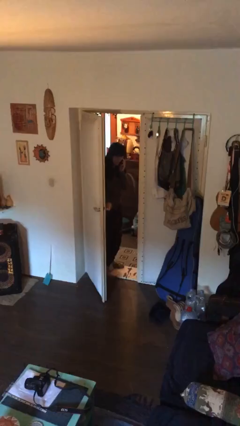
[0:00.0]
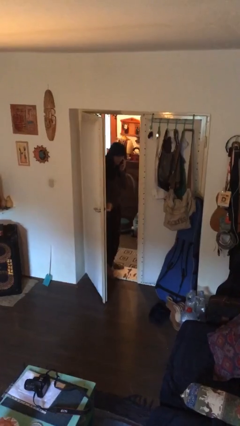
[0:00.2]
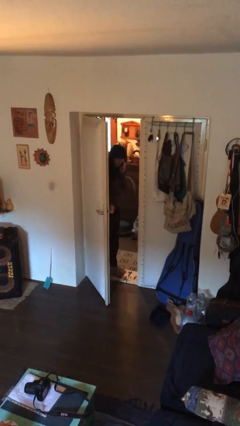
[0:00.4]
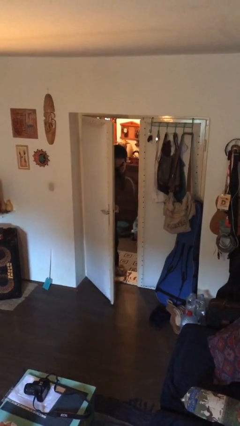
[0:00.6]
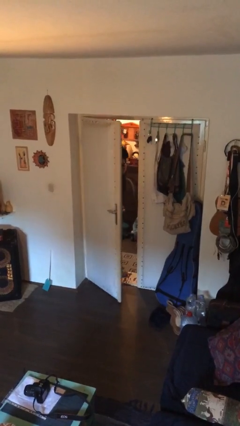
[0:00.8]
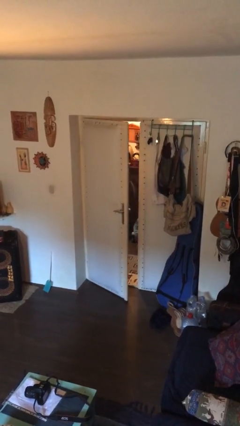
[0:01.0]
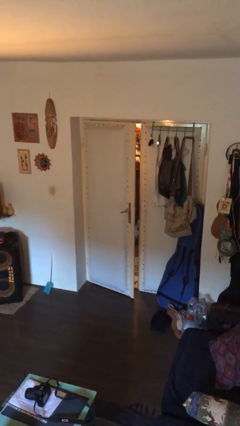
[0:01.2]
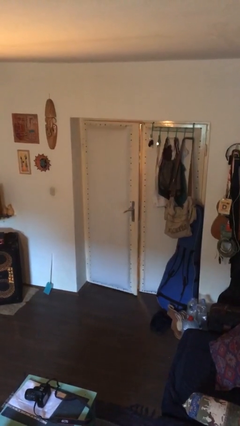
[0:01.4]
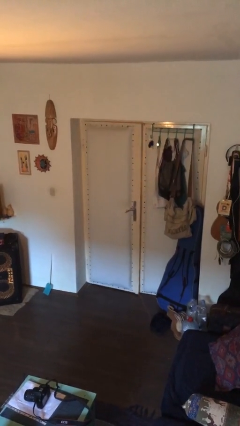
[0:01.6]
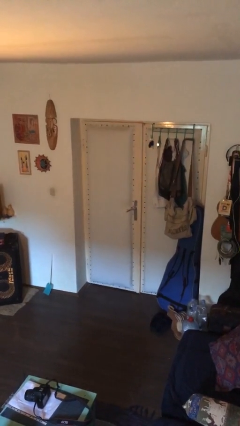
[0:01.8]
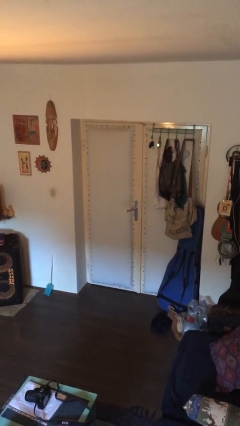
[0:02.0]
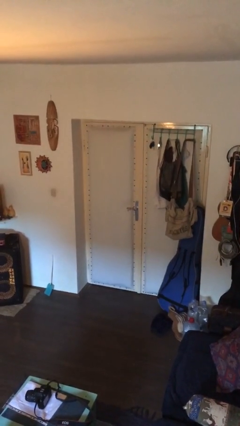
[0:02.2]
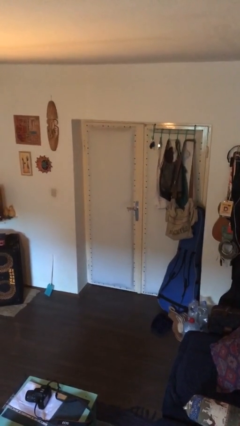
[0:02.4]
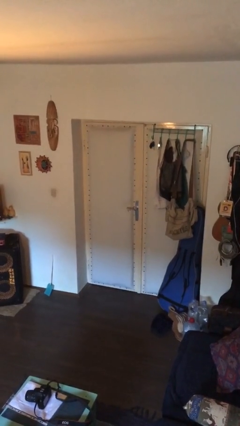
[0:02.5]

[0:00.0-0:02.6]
person closes facility door

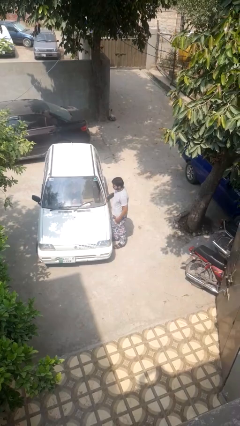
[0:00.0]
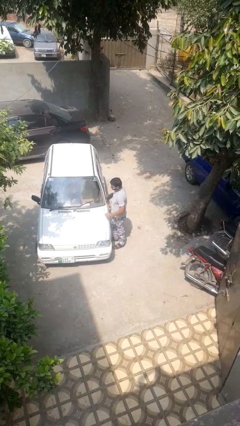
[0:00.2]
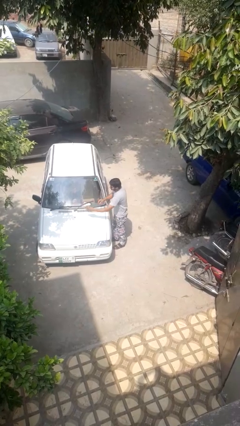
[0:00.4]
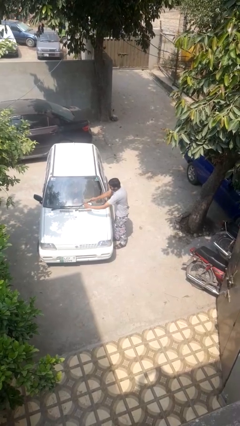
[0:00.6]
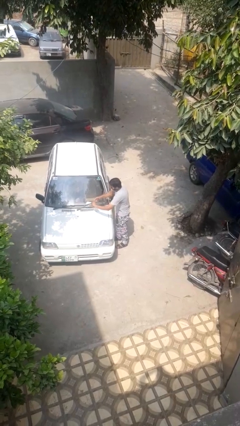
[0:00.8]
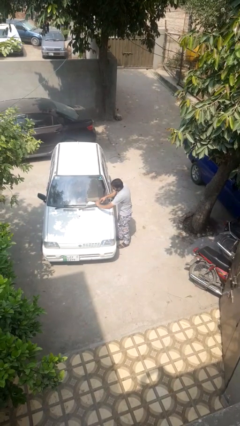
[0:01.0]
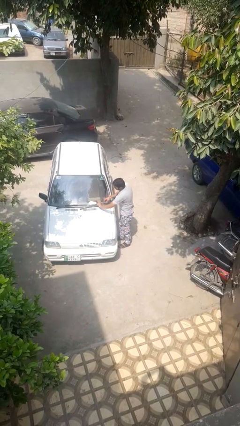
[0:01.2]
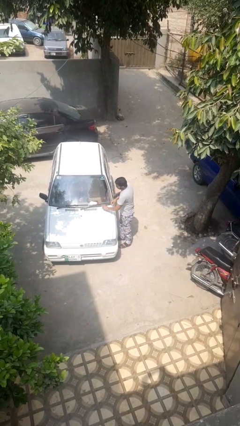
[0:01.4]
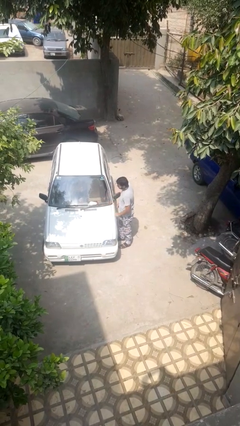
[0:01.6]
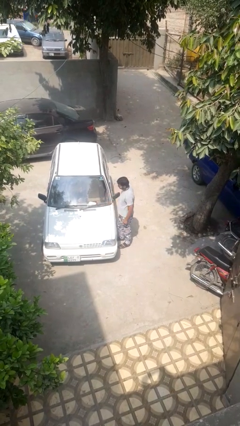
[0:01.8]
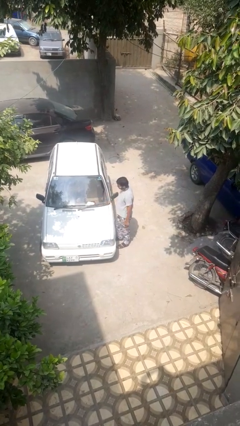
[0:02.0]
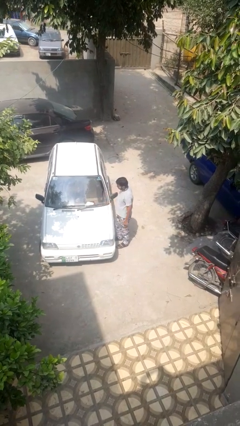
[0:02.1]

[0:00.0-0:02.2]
person flips down car wipers

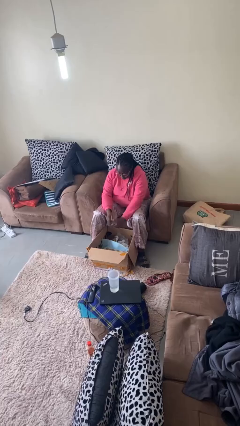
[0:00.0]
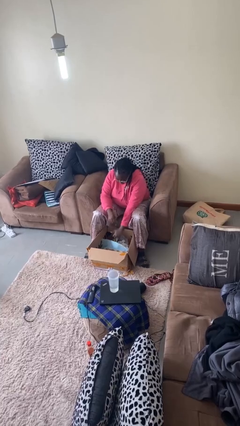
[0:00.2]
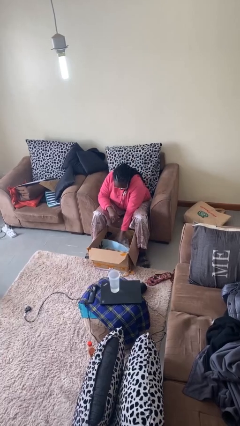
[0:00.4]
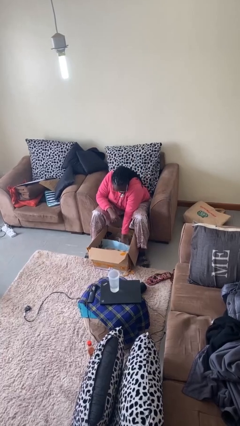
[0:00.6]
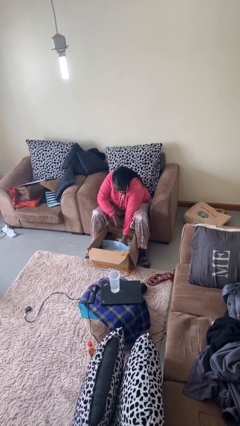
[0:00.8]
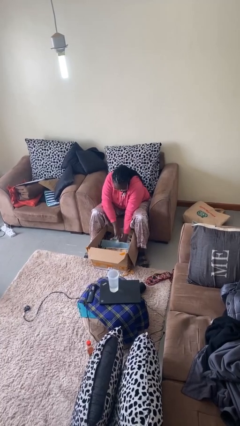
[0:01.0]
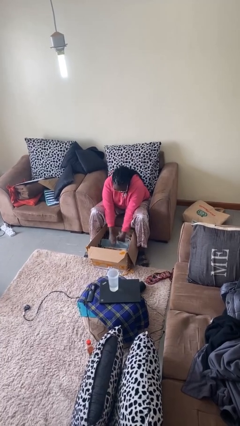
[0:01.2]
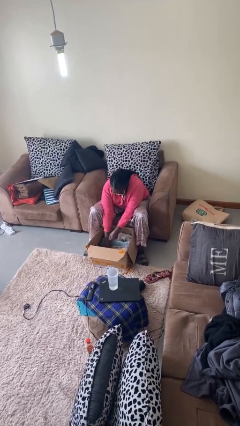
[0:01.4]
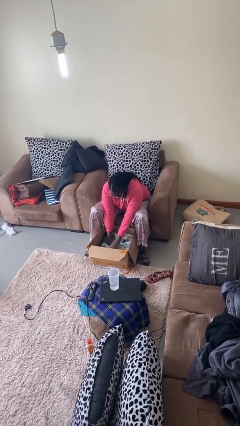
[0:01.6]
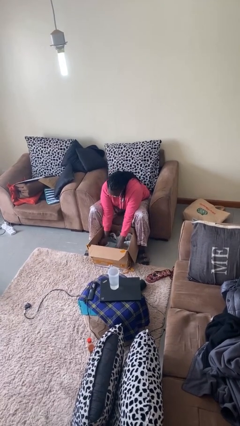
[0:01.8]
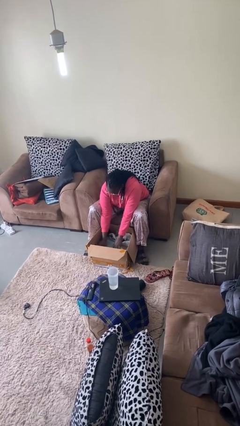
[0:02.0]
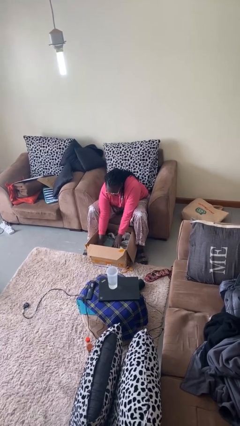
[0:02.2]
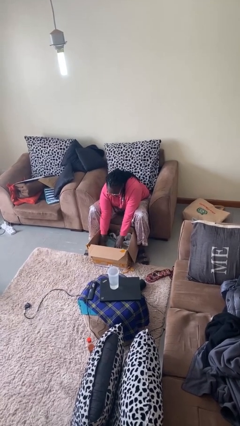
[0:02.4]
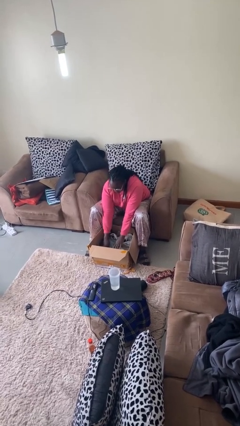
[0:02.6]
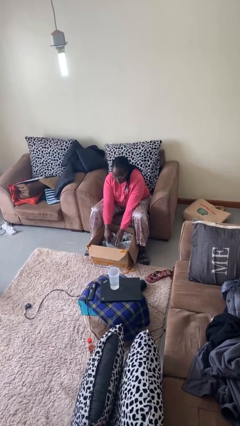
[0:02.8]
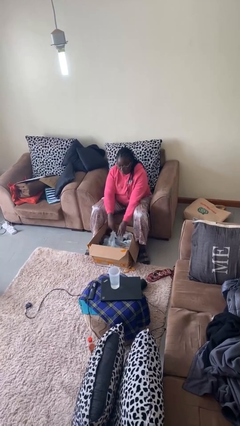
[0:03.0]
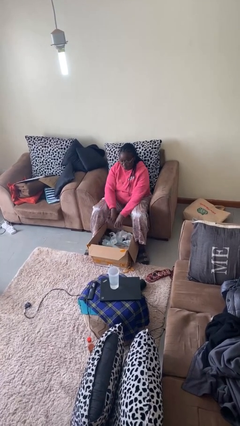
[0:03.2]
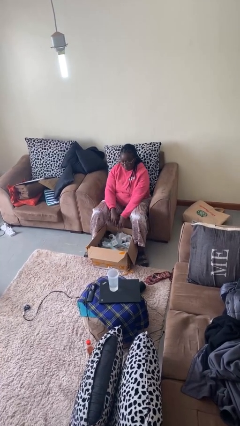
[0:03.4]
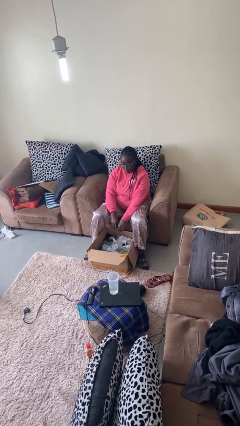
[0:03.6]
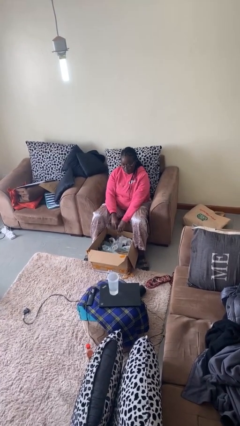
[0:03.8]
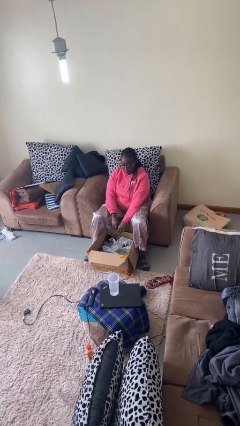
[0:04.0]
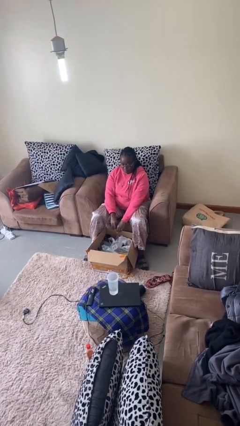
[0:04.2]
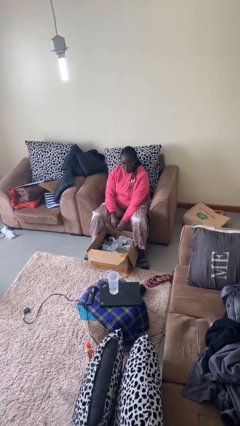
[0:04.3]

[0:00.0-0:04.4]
person searches in box

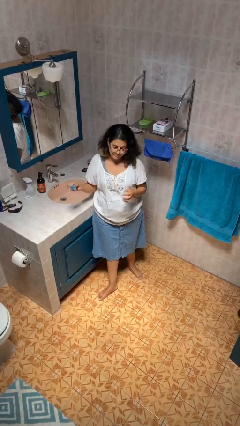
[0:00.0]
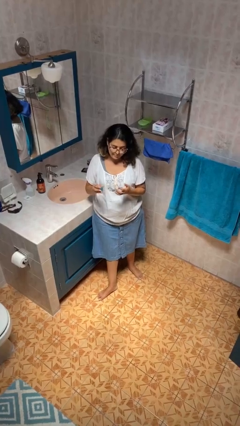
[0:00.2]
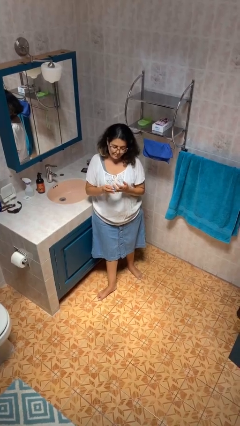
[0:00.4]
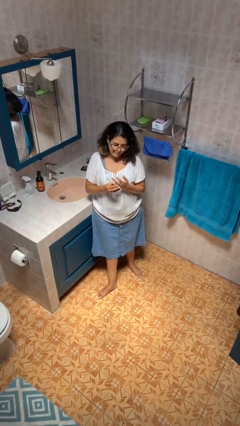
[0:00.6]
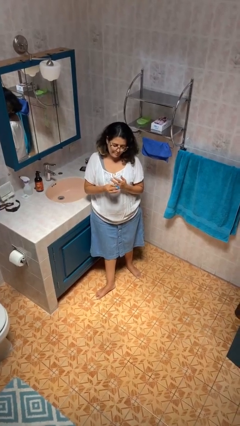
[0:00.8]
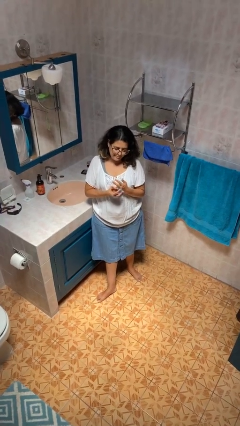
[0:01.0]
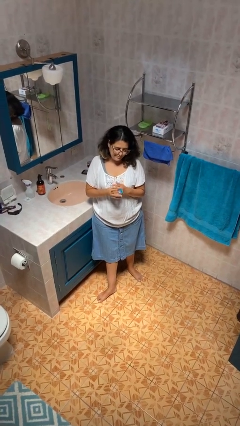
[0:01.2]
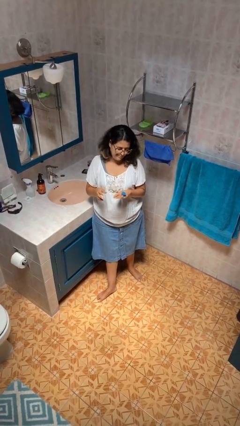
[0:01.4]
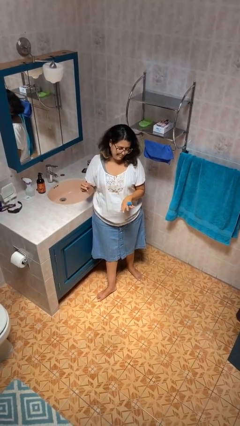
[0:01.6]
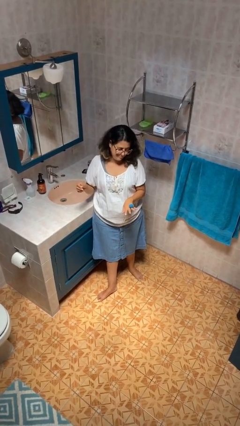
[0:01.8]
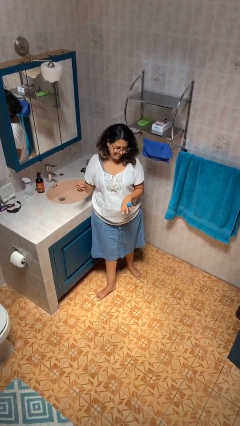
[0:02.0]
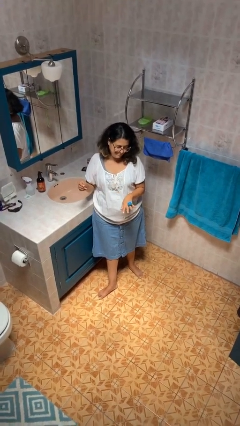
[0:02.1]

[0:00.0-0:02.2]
person puts on ring

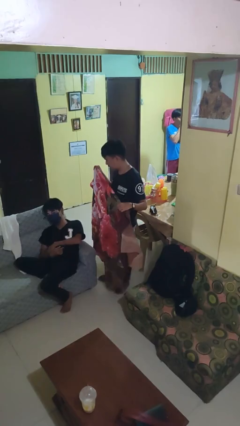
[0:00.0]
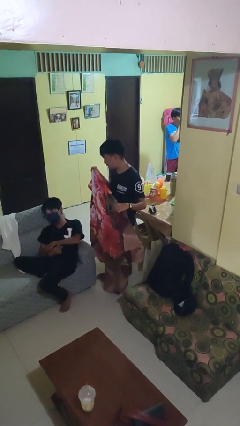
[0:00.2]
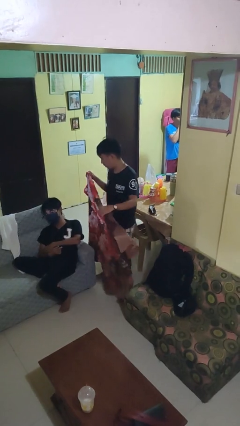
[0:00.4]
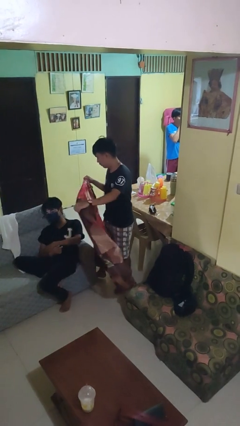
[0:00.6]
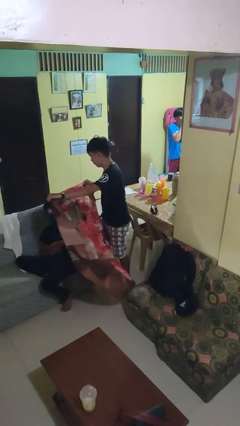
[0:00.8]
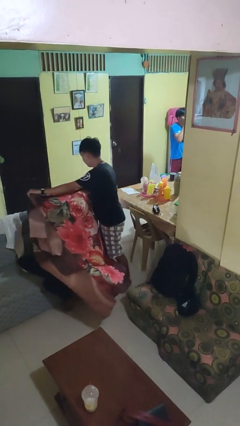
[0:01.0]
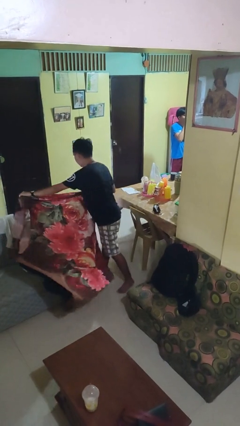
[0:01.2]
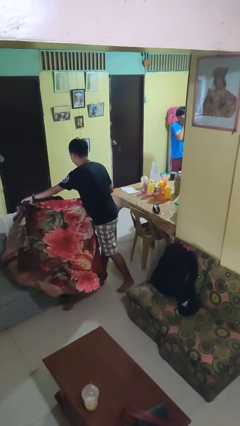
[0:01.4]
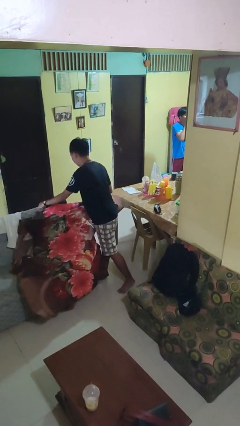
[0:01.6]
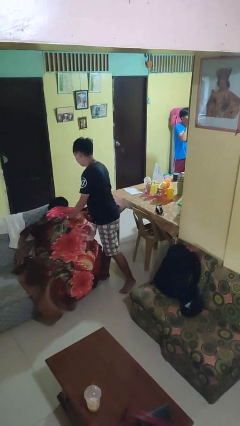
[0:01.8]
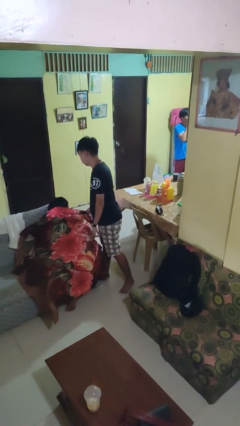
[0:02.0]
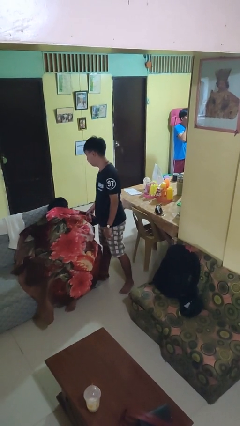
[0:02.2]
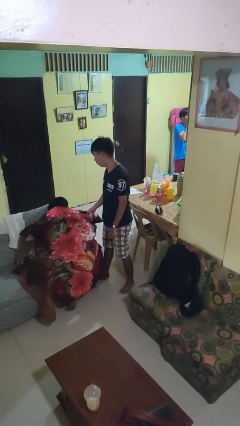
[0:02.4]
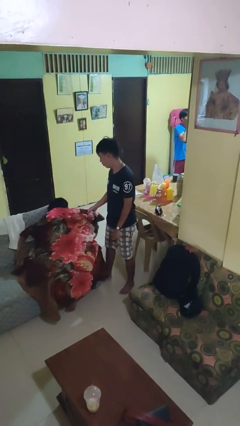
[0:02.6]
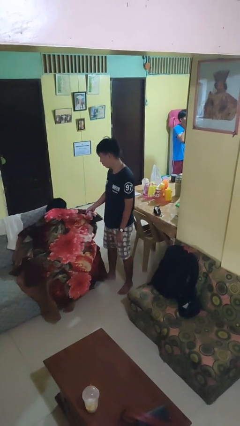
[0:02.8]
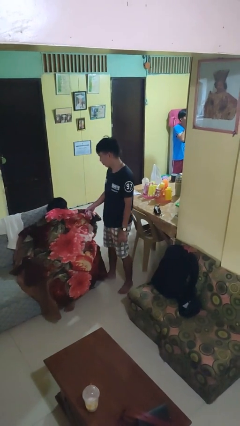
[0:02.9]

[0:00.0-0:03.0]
person covers friend with blanket

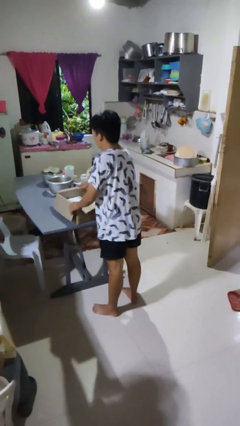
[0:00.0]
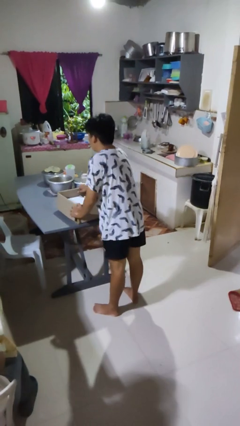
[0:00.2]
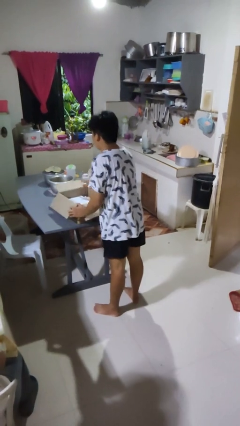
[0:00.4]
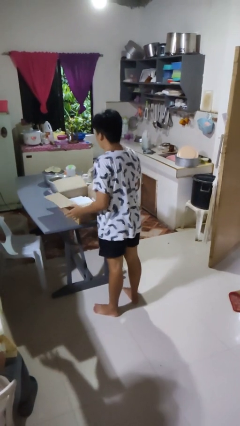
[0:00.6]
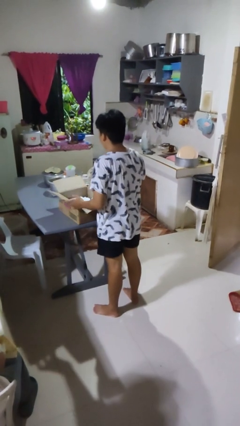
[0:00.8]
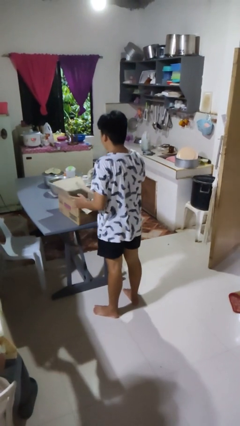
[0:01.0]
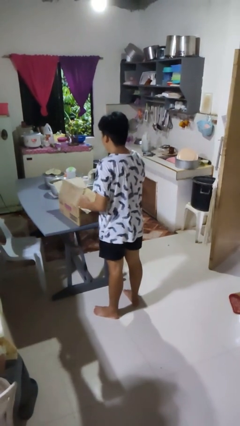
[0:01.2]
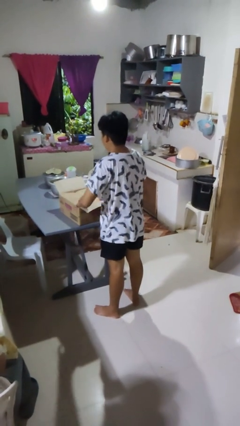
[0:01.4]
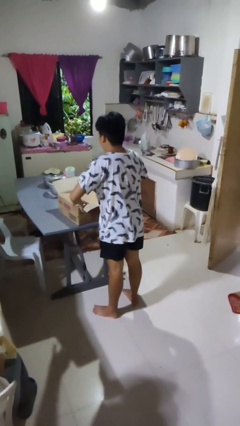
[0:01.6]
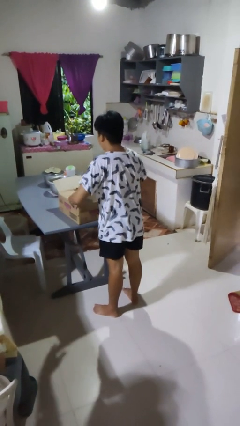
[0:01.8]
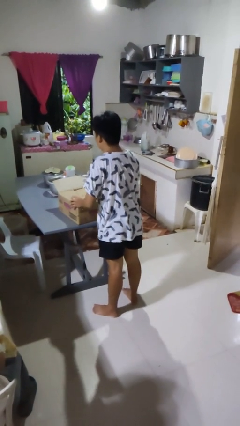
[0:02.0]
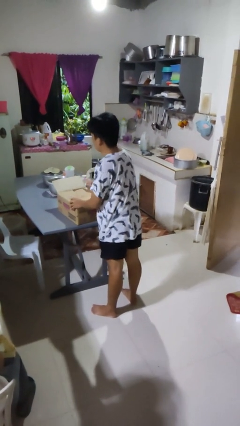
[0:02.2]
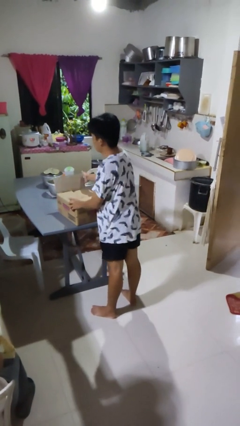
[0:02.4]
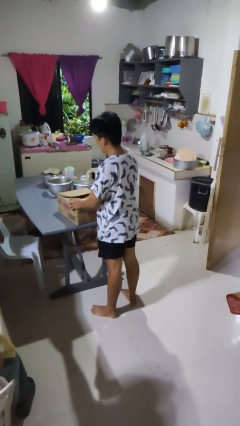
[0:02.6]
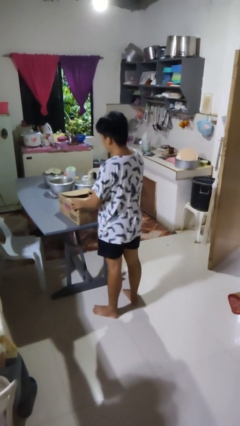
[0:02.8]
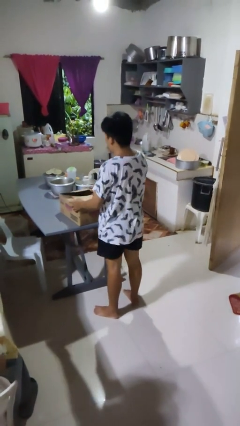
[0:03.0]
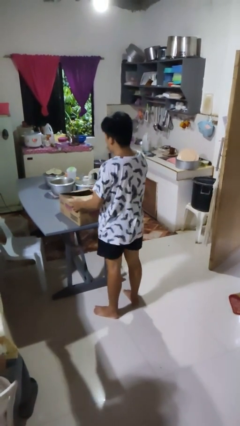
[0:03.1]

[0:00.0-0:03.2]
person closes box
